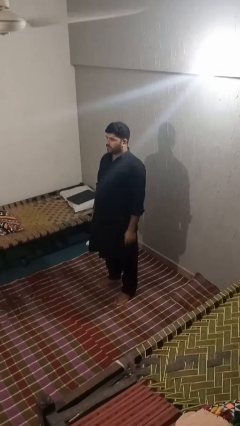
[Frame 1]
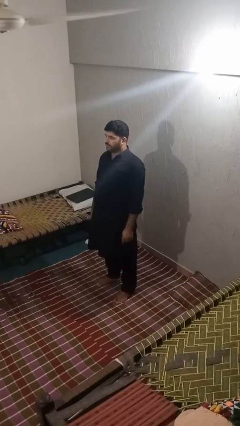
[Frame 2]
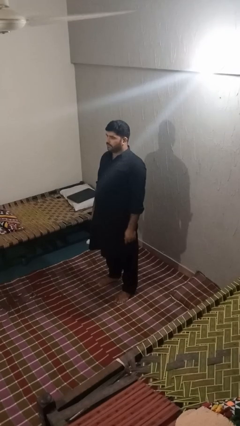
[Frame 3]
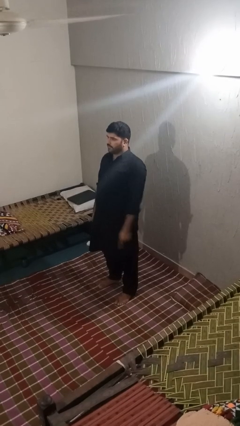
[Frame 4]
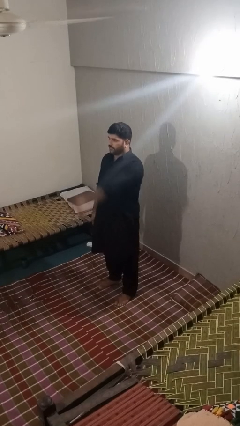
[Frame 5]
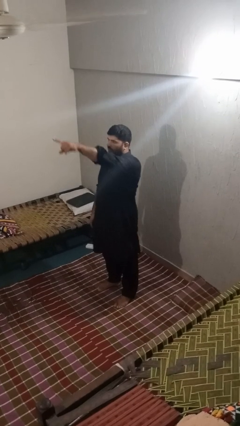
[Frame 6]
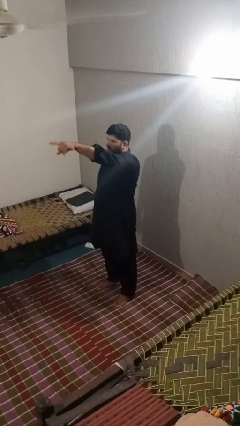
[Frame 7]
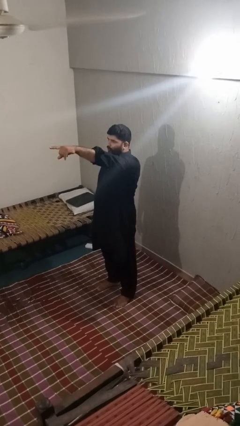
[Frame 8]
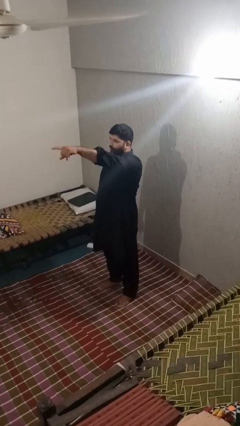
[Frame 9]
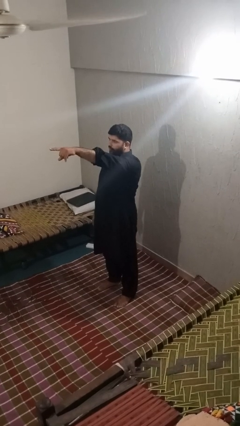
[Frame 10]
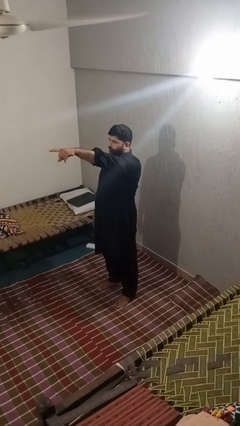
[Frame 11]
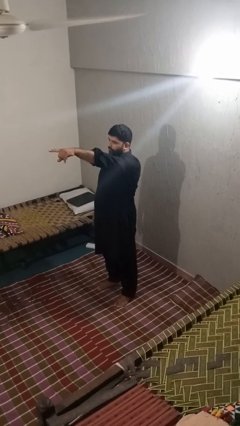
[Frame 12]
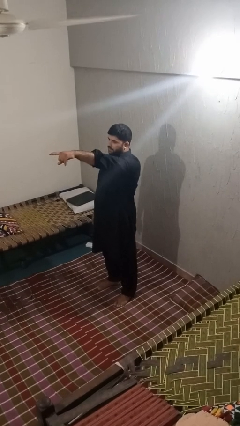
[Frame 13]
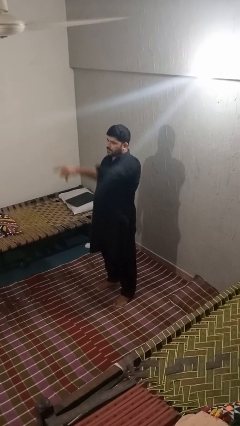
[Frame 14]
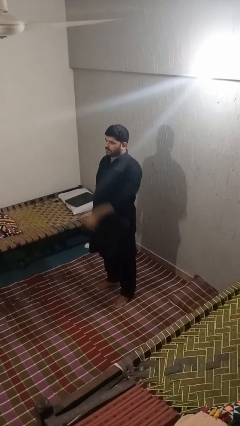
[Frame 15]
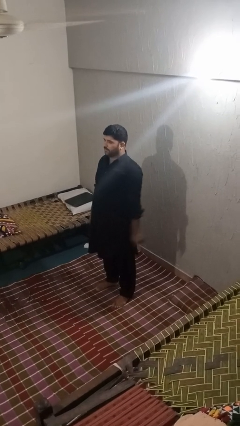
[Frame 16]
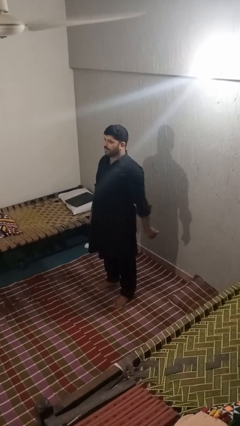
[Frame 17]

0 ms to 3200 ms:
person points at person

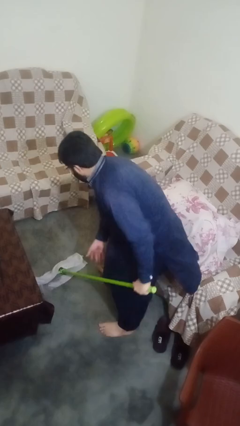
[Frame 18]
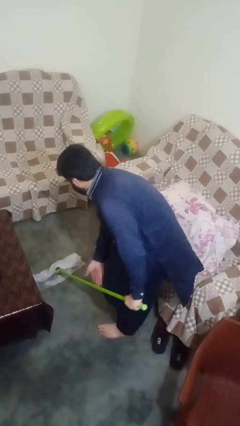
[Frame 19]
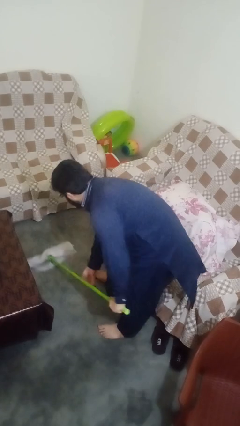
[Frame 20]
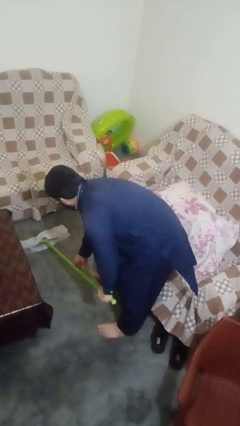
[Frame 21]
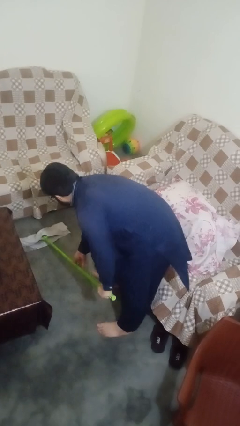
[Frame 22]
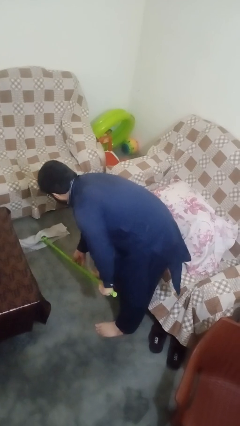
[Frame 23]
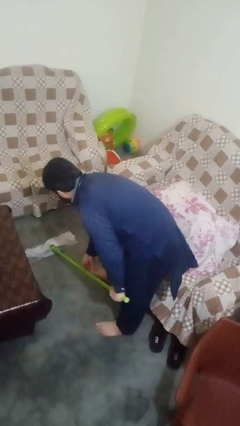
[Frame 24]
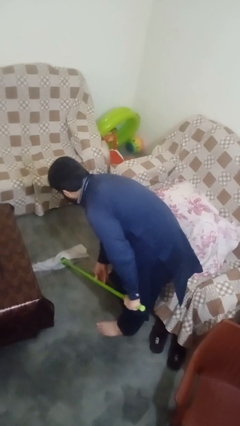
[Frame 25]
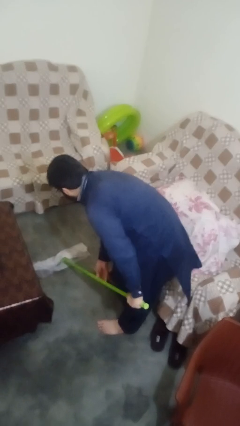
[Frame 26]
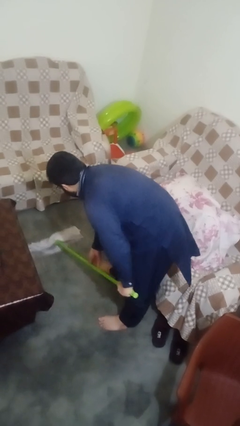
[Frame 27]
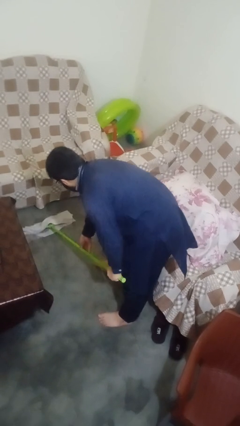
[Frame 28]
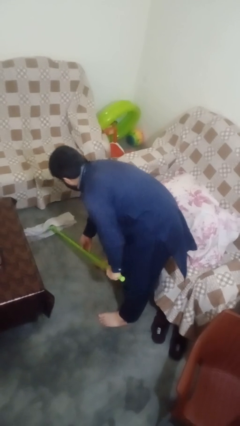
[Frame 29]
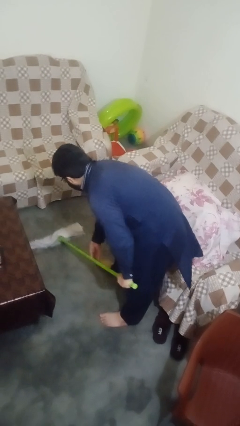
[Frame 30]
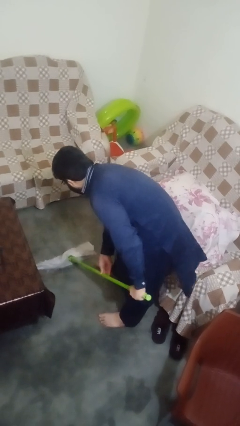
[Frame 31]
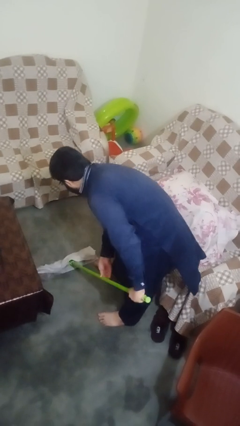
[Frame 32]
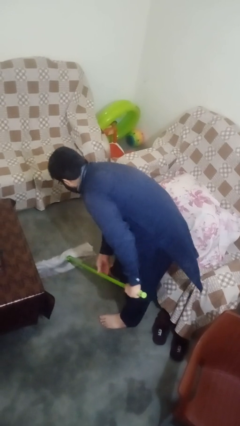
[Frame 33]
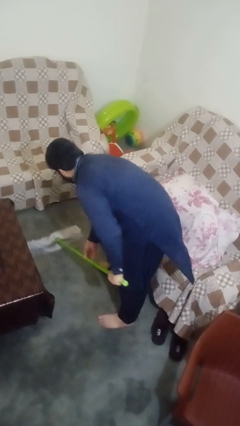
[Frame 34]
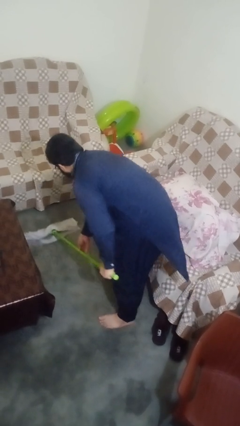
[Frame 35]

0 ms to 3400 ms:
person mops

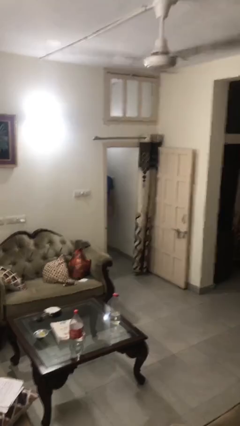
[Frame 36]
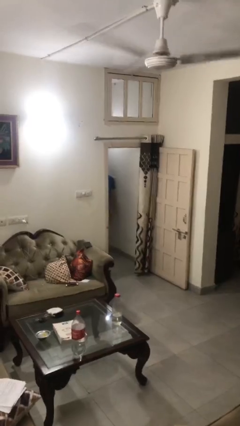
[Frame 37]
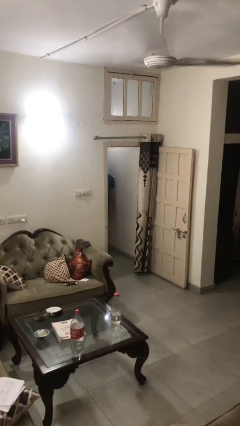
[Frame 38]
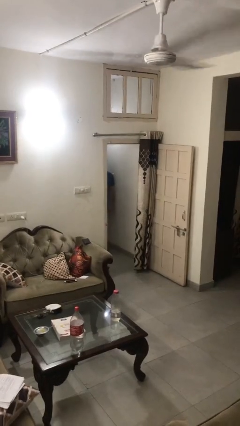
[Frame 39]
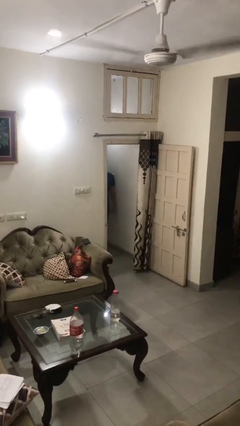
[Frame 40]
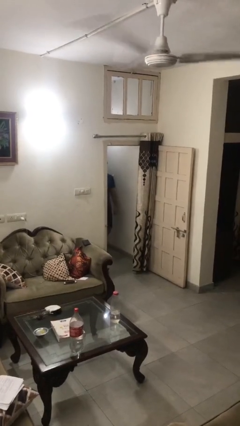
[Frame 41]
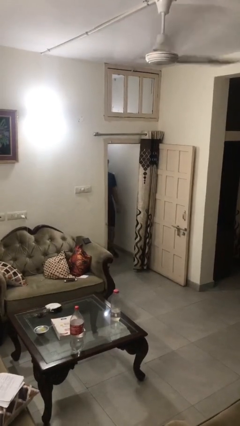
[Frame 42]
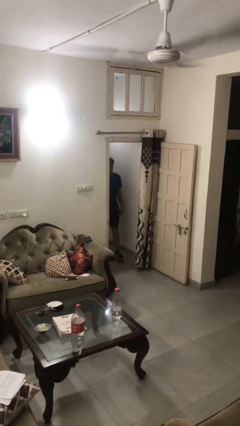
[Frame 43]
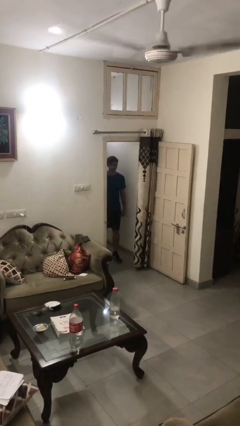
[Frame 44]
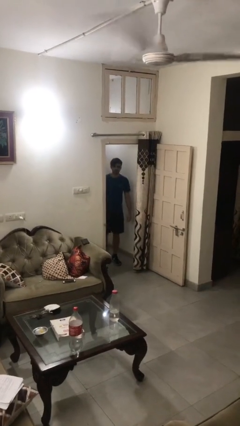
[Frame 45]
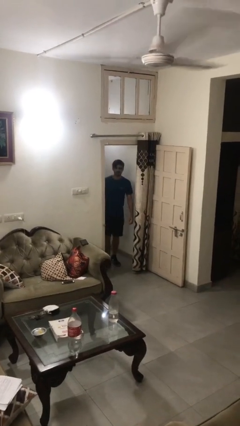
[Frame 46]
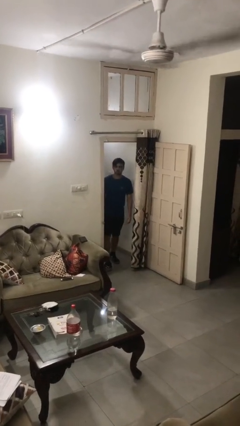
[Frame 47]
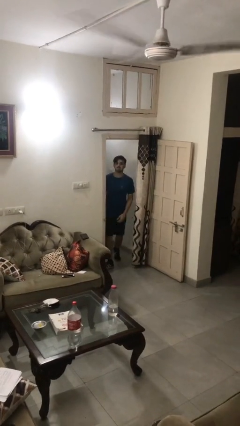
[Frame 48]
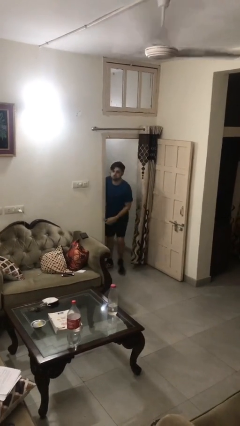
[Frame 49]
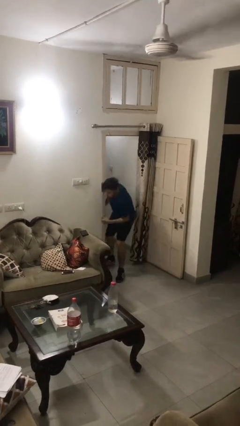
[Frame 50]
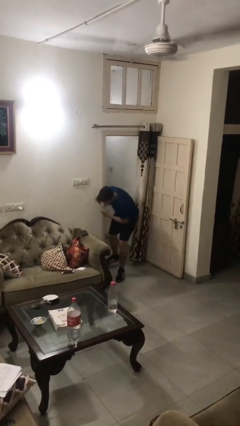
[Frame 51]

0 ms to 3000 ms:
person bumps into wall

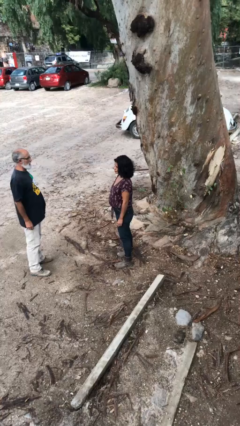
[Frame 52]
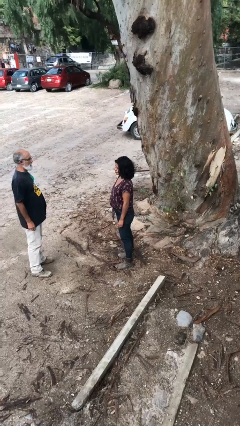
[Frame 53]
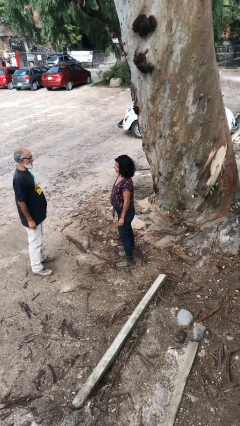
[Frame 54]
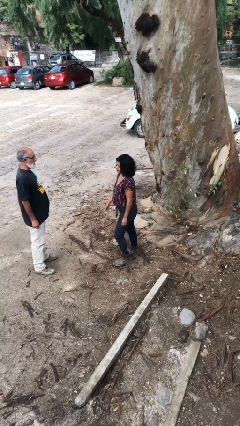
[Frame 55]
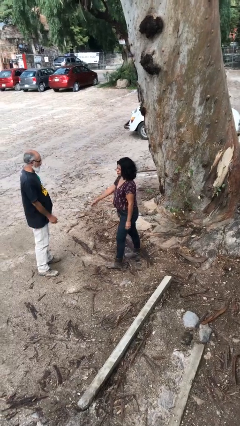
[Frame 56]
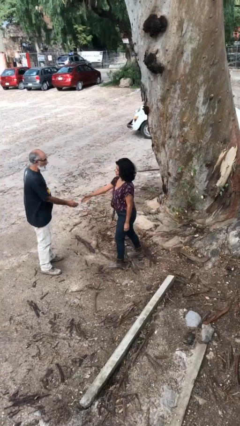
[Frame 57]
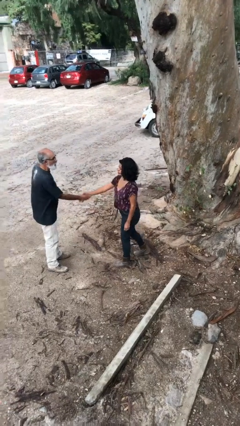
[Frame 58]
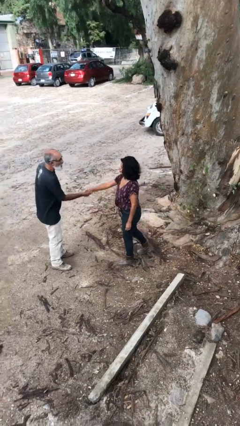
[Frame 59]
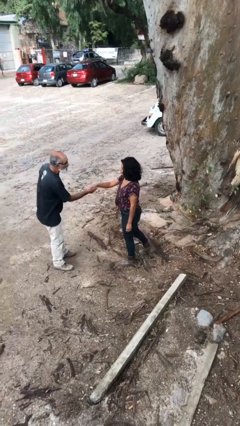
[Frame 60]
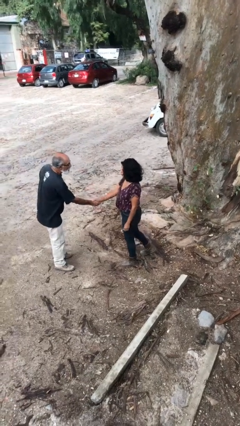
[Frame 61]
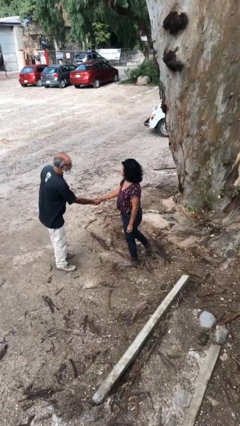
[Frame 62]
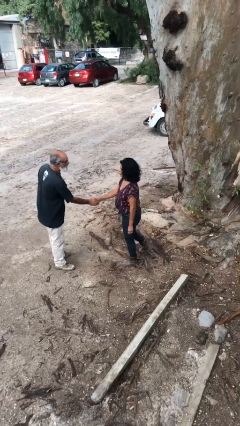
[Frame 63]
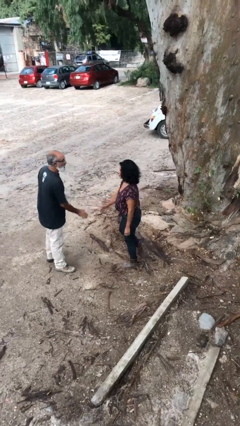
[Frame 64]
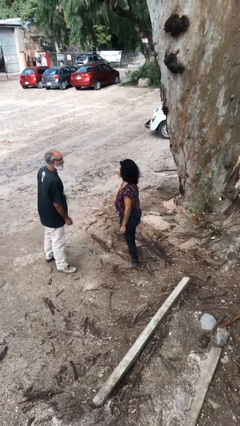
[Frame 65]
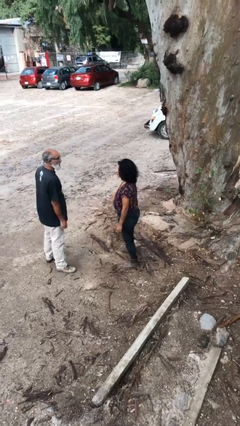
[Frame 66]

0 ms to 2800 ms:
person shakes hand

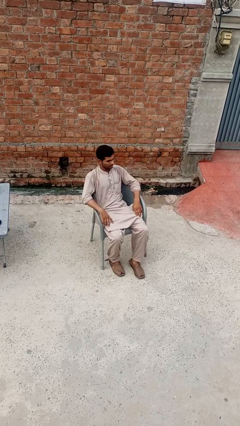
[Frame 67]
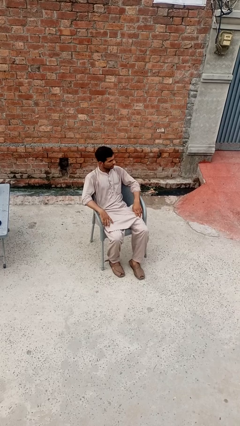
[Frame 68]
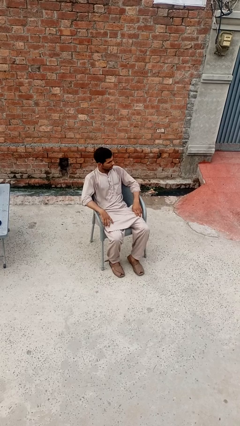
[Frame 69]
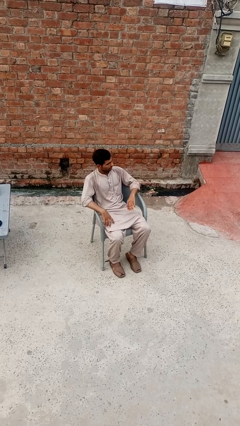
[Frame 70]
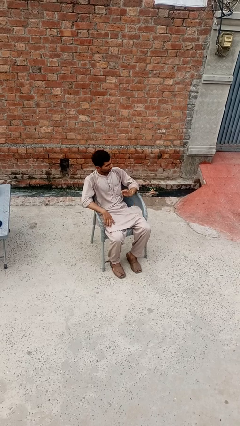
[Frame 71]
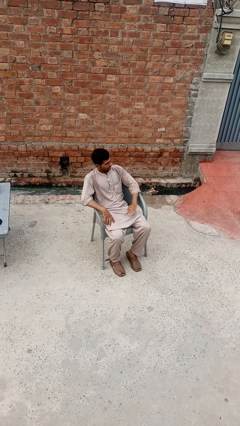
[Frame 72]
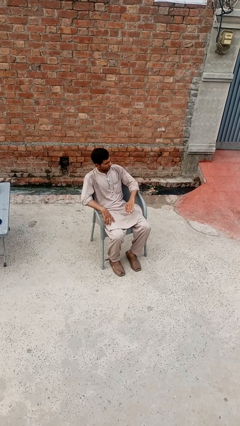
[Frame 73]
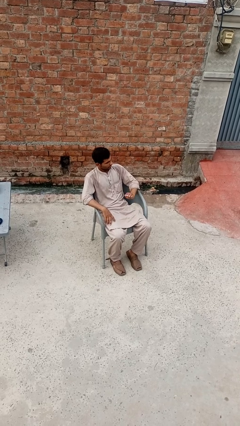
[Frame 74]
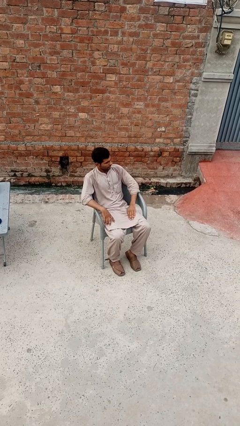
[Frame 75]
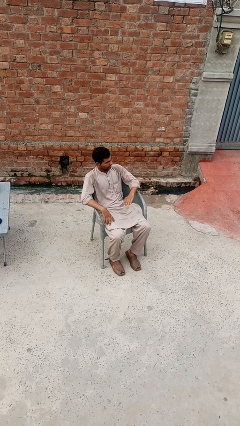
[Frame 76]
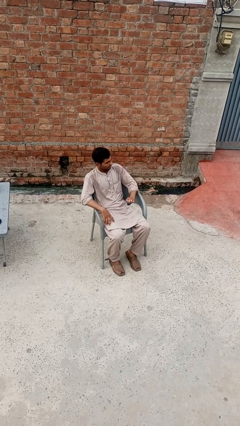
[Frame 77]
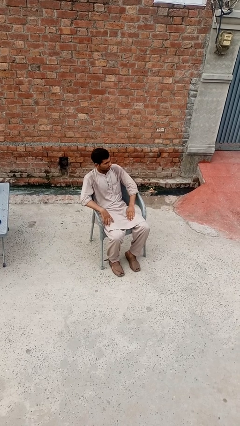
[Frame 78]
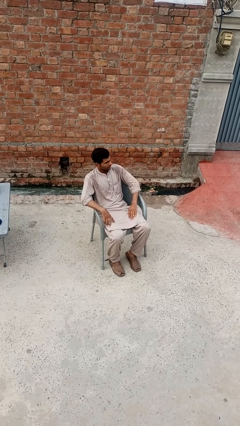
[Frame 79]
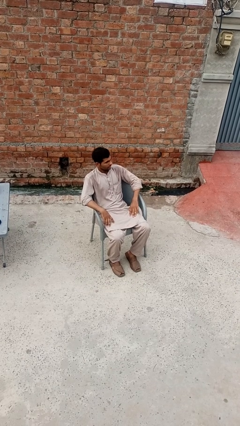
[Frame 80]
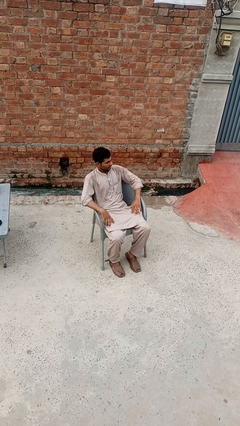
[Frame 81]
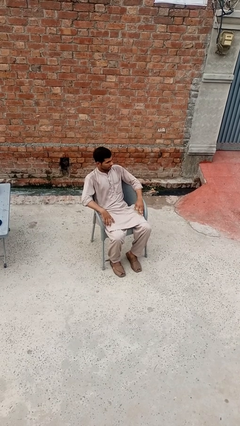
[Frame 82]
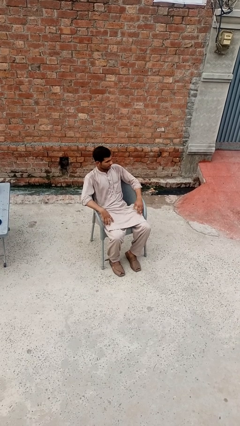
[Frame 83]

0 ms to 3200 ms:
person slaps hands on thighs

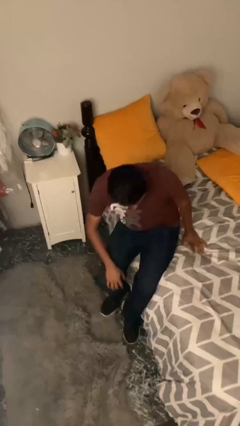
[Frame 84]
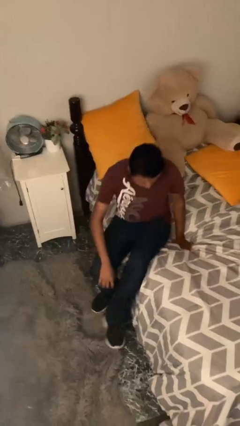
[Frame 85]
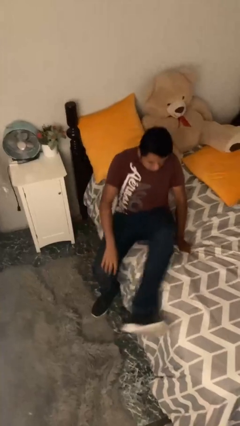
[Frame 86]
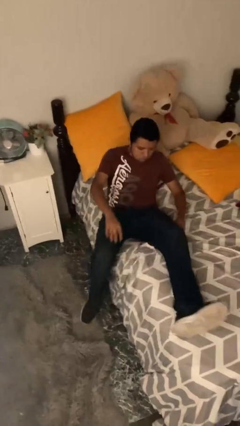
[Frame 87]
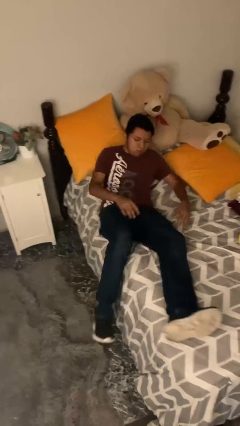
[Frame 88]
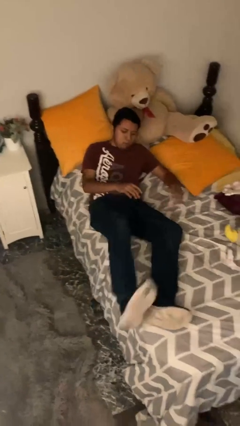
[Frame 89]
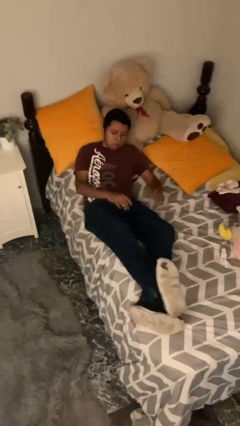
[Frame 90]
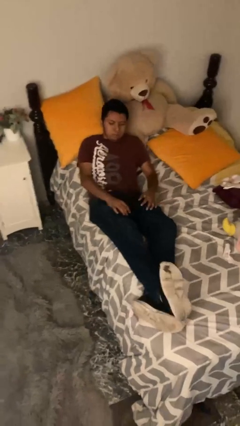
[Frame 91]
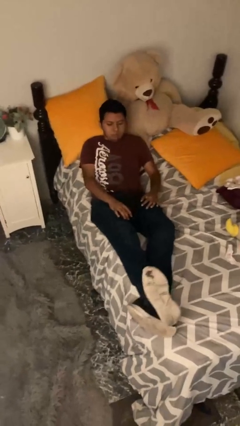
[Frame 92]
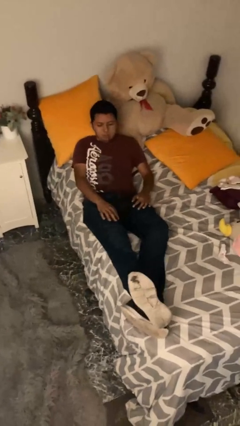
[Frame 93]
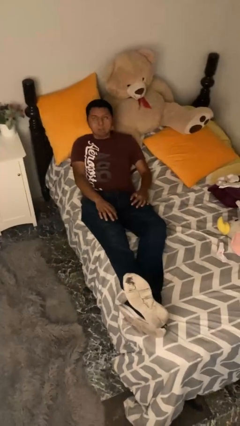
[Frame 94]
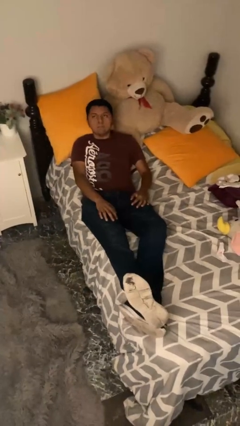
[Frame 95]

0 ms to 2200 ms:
person lies down on bed
